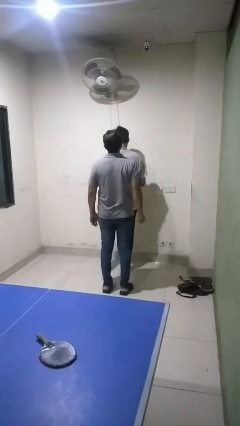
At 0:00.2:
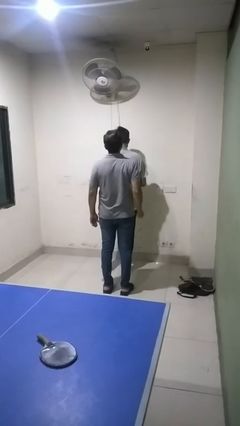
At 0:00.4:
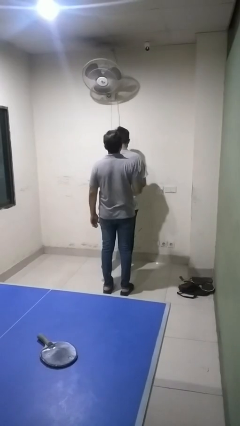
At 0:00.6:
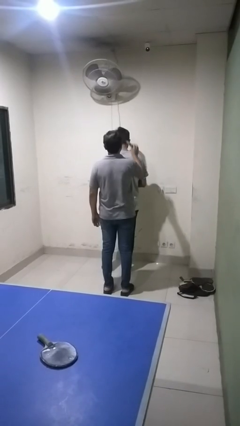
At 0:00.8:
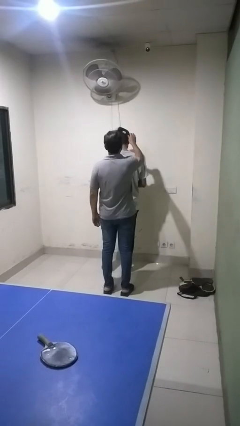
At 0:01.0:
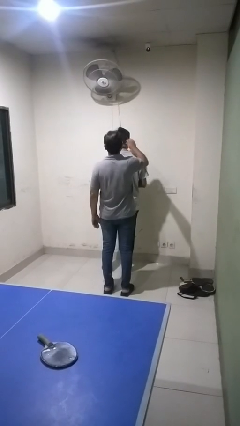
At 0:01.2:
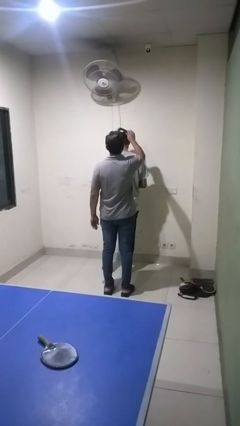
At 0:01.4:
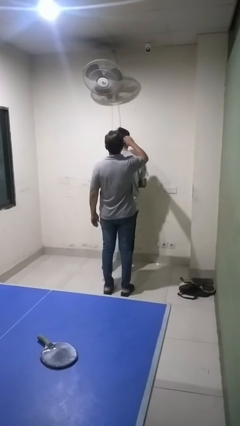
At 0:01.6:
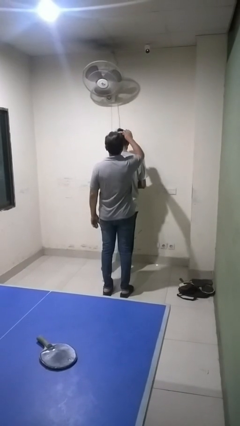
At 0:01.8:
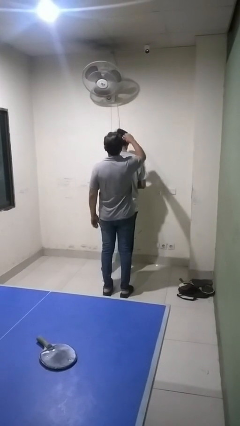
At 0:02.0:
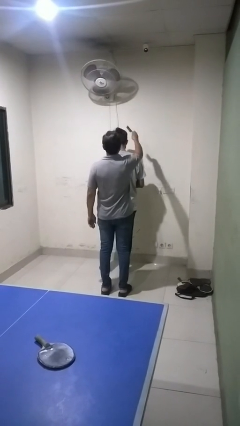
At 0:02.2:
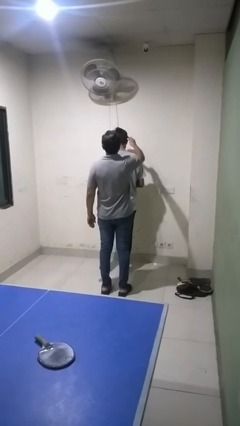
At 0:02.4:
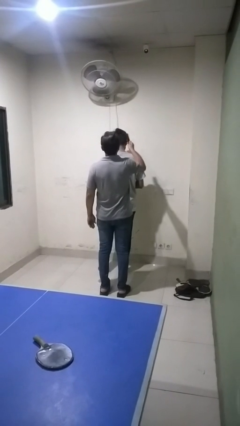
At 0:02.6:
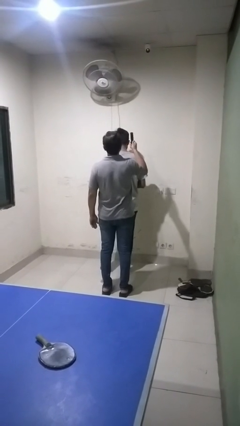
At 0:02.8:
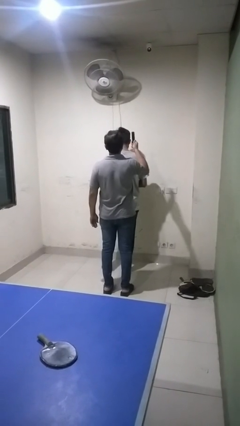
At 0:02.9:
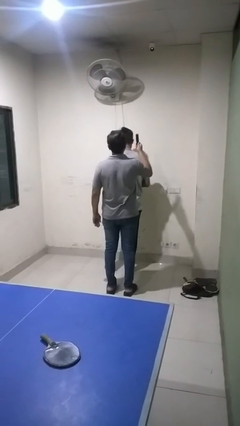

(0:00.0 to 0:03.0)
person brushes hair of person

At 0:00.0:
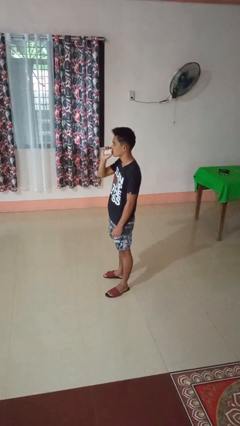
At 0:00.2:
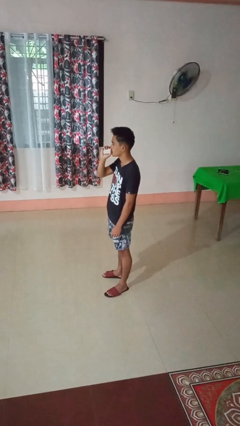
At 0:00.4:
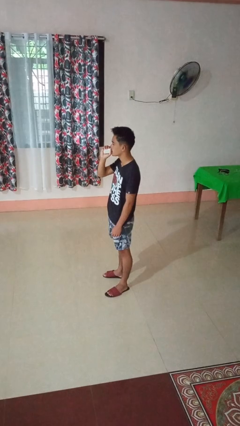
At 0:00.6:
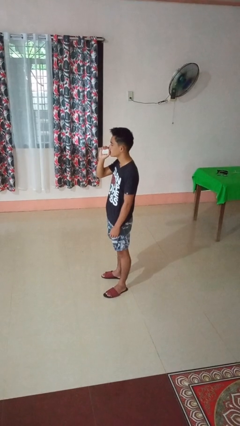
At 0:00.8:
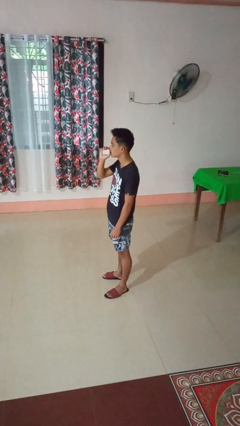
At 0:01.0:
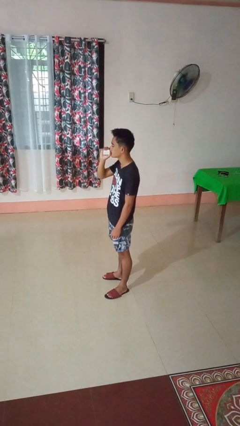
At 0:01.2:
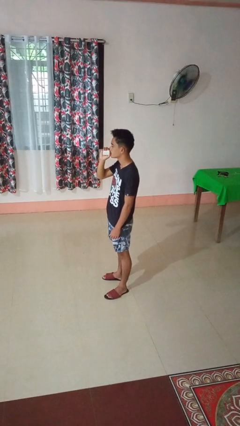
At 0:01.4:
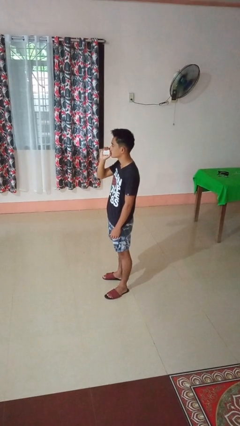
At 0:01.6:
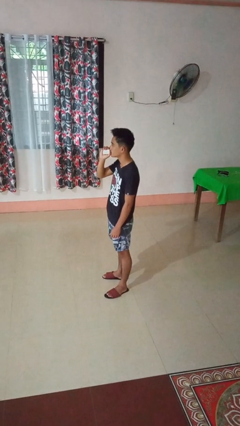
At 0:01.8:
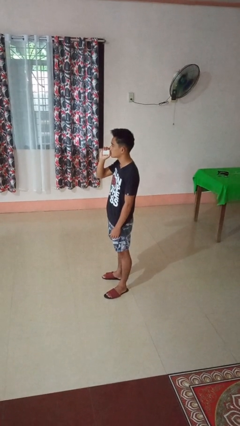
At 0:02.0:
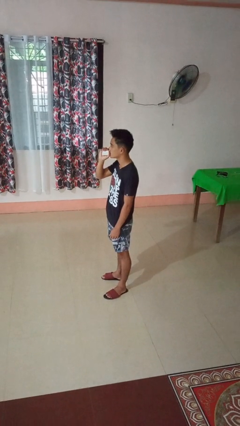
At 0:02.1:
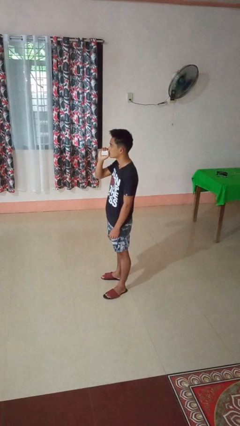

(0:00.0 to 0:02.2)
person vapes

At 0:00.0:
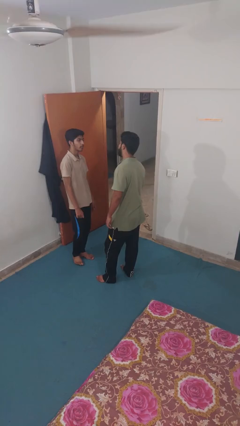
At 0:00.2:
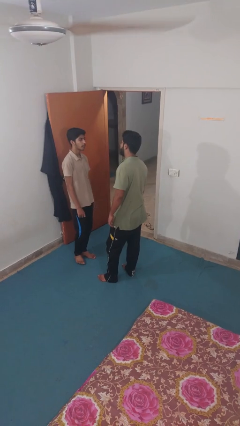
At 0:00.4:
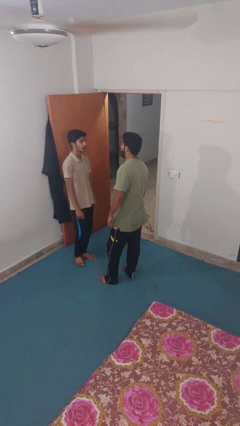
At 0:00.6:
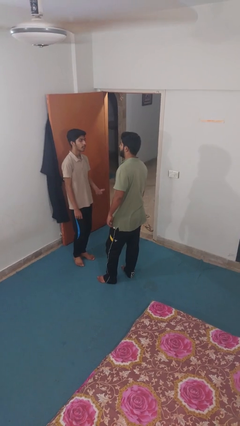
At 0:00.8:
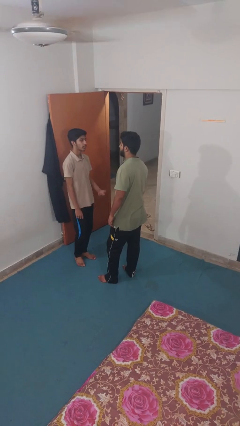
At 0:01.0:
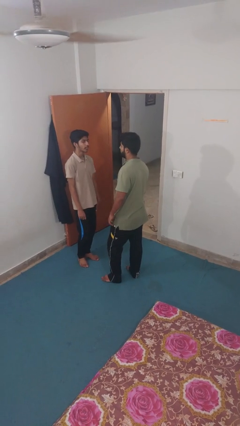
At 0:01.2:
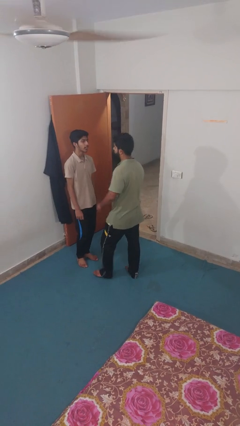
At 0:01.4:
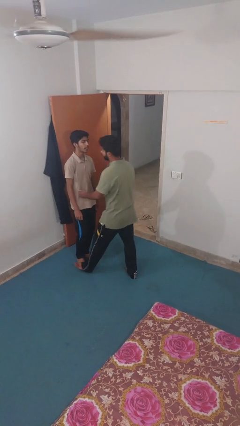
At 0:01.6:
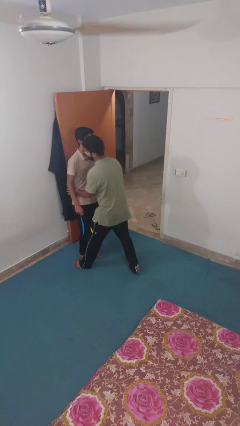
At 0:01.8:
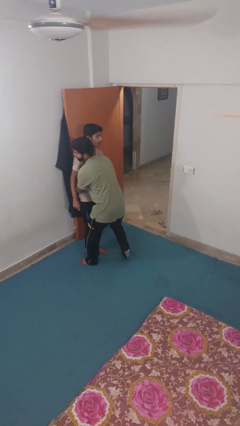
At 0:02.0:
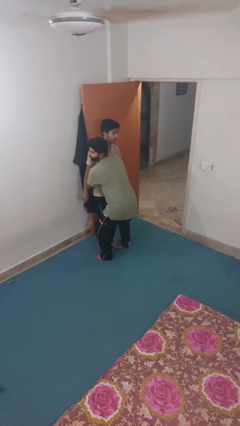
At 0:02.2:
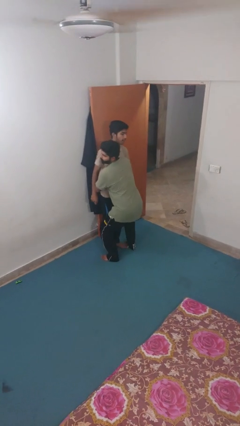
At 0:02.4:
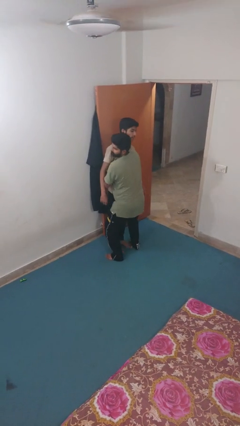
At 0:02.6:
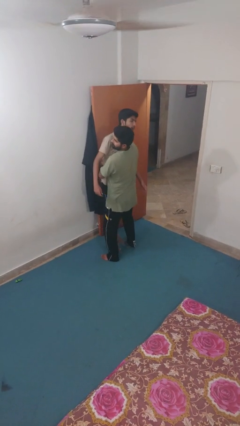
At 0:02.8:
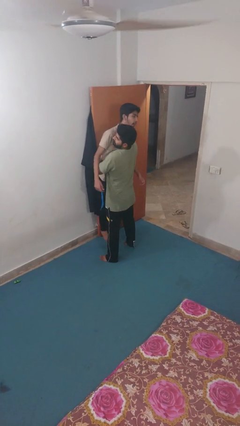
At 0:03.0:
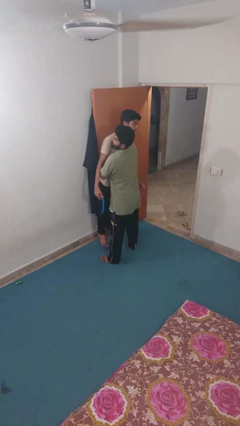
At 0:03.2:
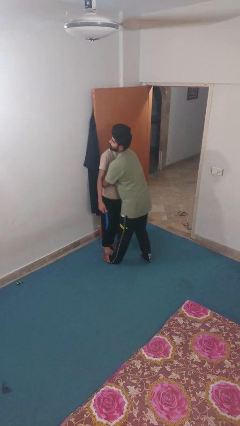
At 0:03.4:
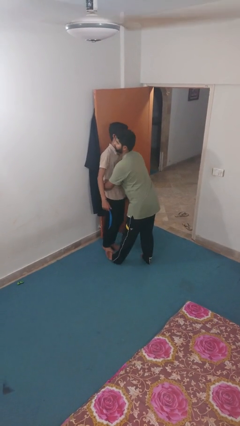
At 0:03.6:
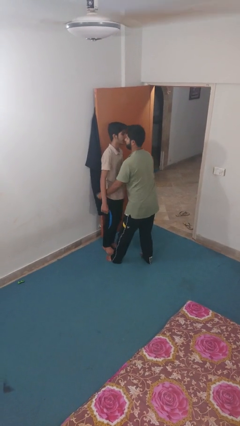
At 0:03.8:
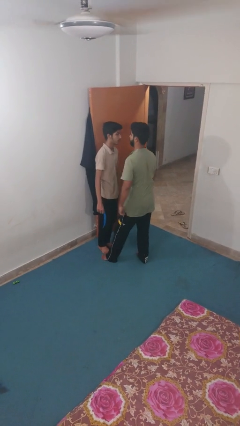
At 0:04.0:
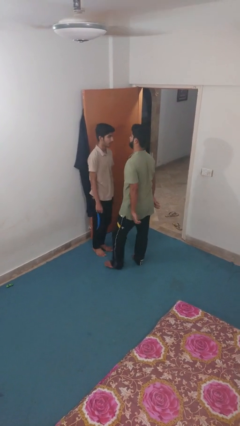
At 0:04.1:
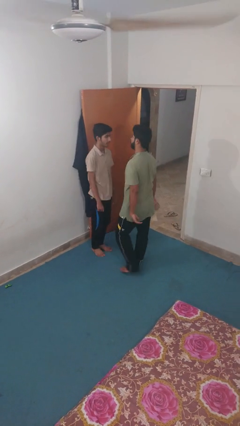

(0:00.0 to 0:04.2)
person picks up person

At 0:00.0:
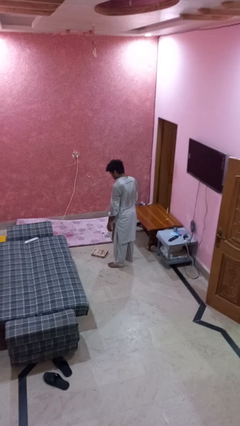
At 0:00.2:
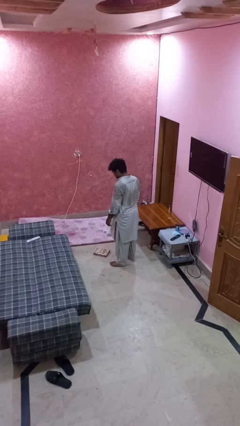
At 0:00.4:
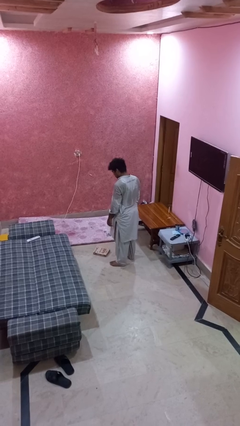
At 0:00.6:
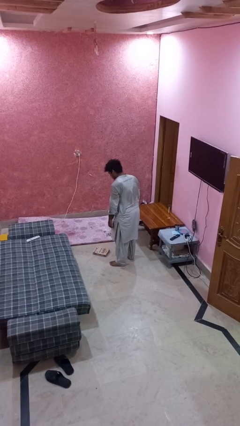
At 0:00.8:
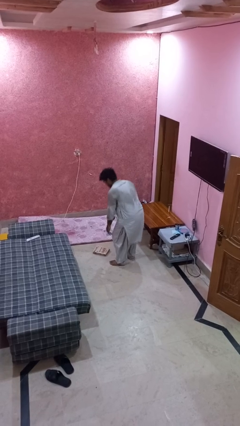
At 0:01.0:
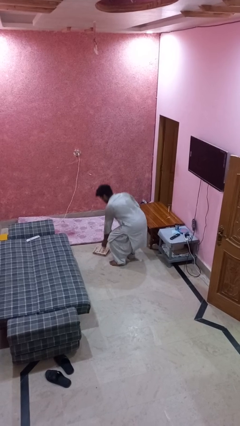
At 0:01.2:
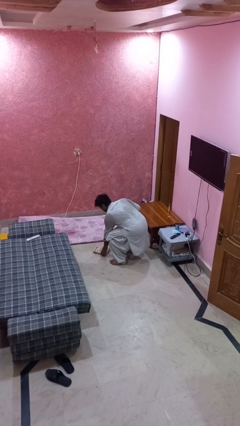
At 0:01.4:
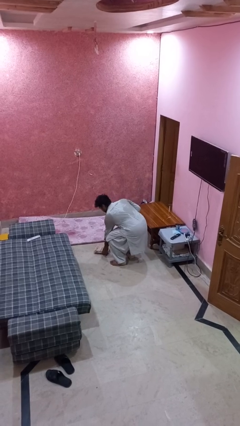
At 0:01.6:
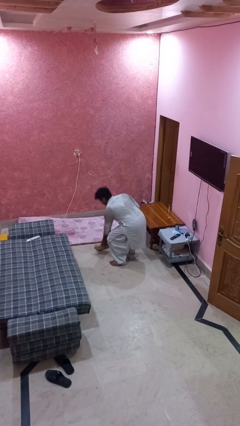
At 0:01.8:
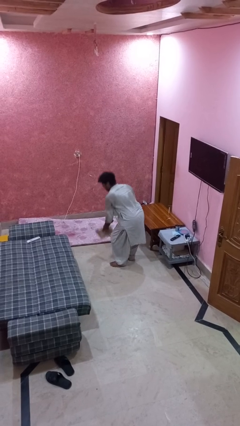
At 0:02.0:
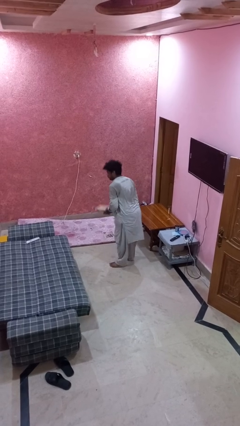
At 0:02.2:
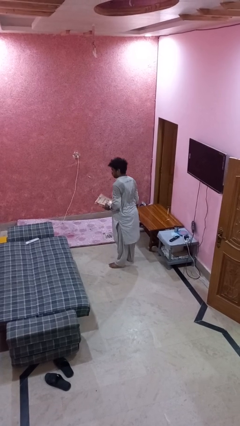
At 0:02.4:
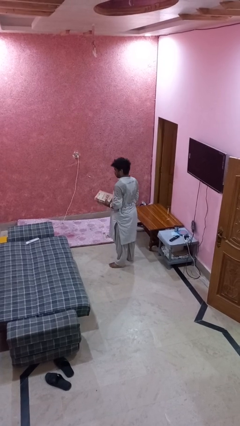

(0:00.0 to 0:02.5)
person picks up object from floor

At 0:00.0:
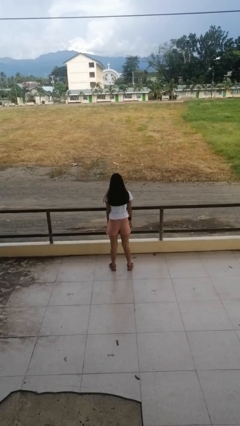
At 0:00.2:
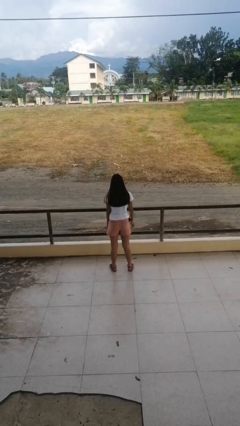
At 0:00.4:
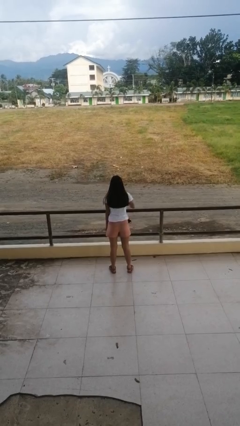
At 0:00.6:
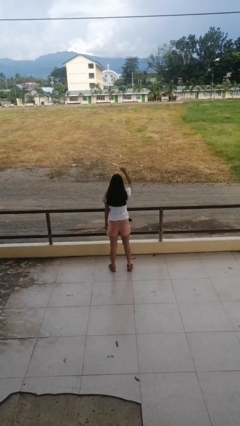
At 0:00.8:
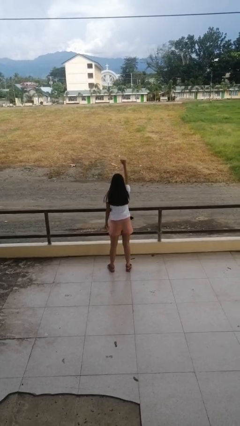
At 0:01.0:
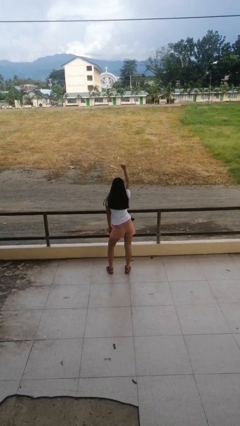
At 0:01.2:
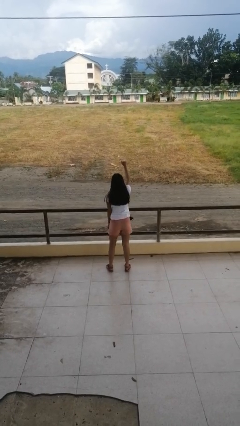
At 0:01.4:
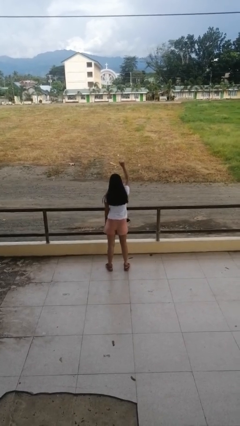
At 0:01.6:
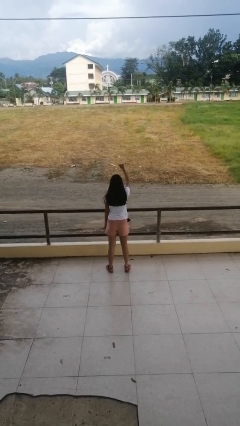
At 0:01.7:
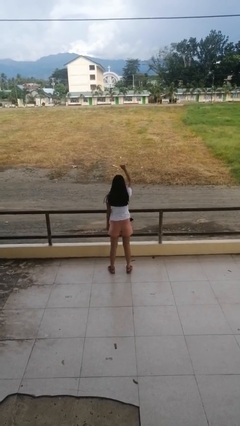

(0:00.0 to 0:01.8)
person dances in place

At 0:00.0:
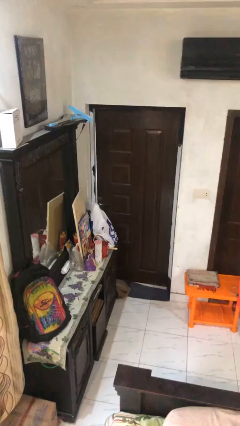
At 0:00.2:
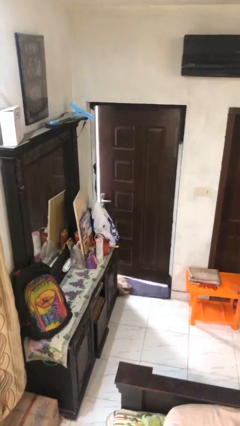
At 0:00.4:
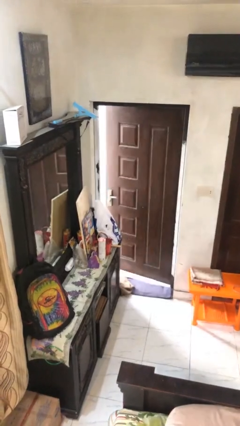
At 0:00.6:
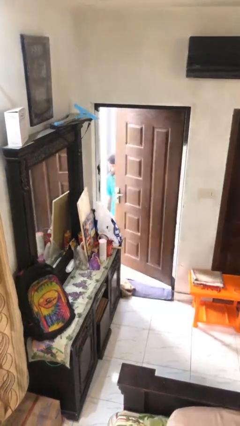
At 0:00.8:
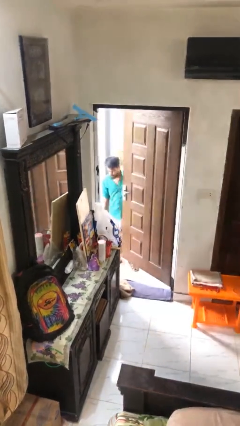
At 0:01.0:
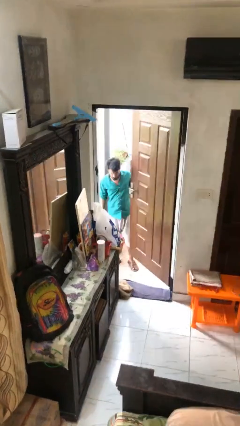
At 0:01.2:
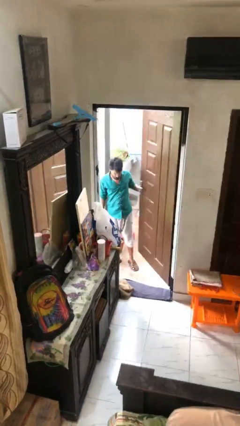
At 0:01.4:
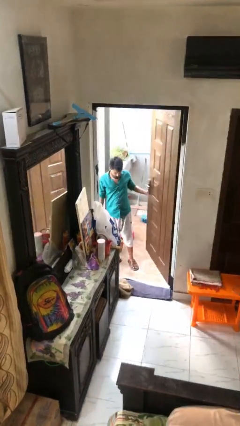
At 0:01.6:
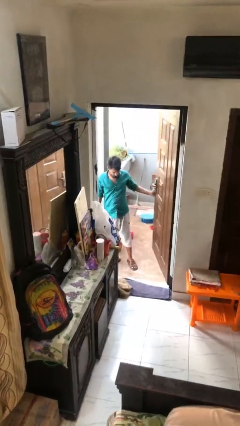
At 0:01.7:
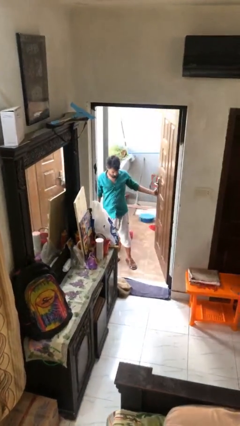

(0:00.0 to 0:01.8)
person opens facility door

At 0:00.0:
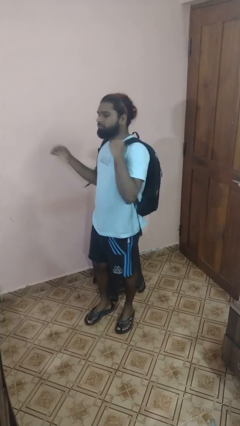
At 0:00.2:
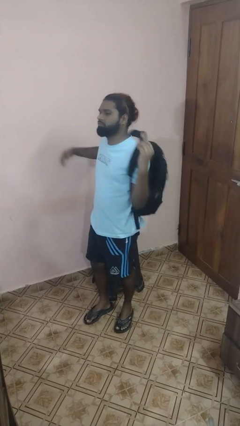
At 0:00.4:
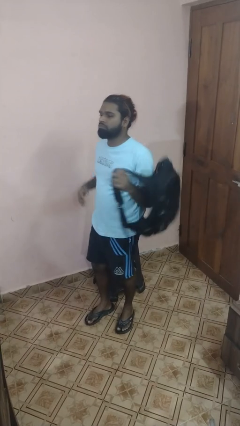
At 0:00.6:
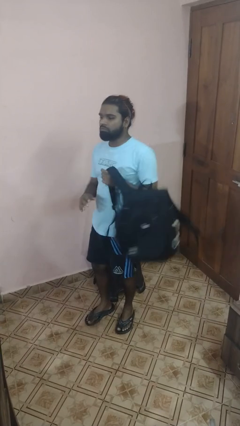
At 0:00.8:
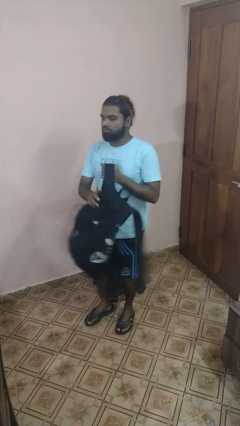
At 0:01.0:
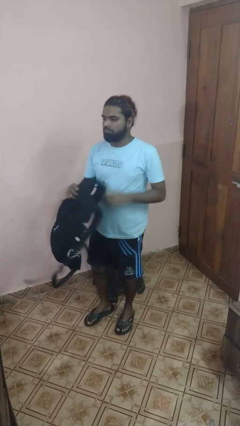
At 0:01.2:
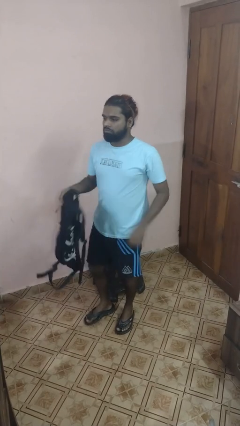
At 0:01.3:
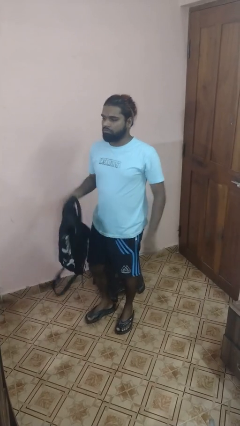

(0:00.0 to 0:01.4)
person takes off backpack
